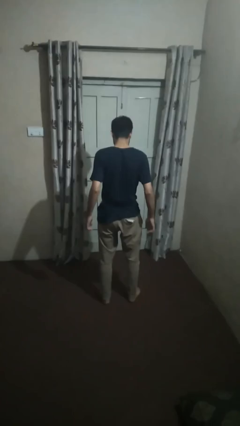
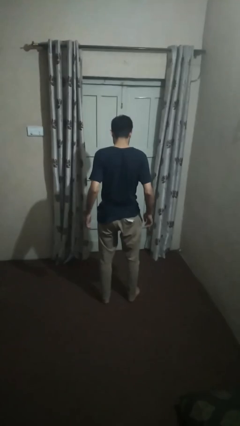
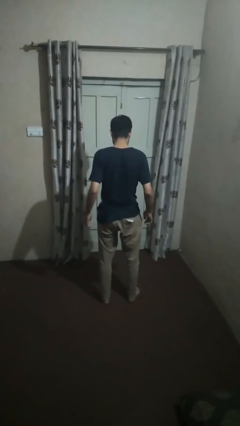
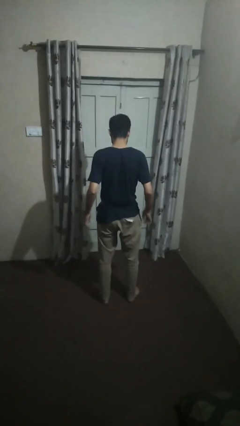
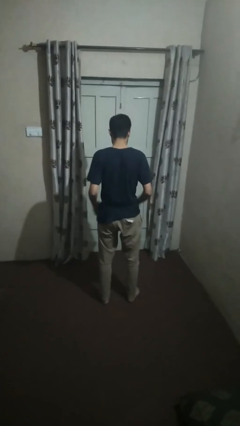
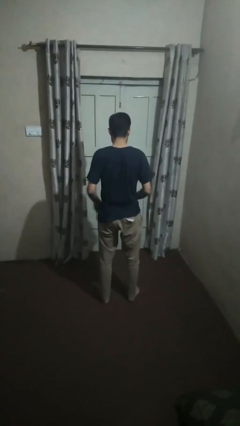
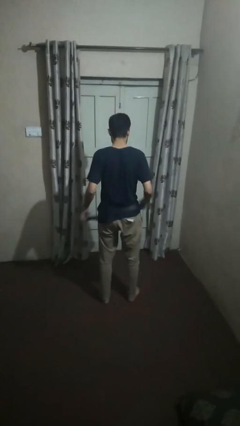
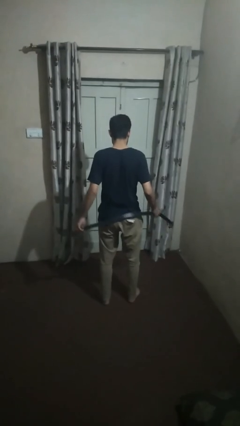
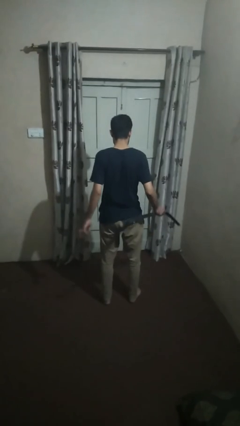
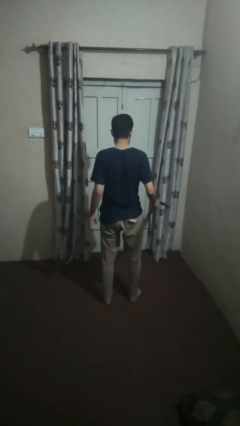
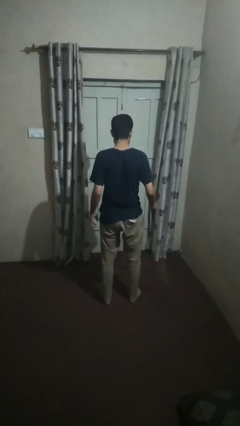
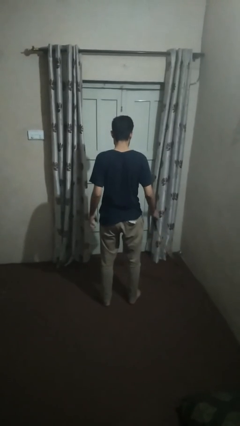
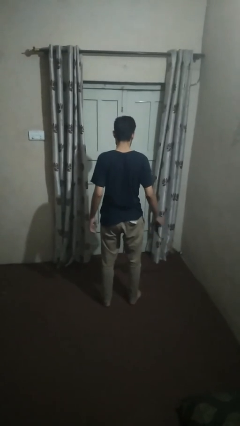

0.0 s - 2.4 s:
person takes off belt

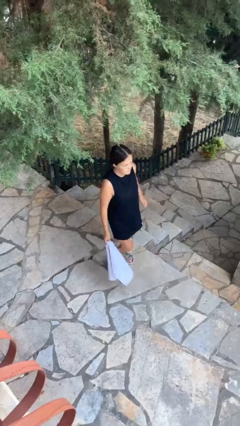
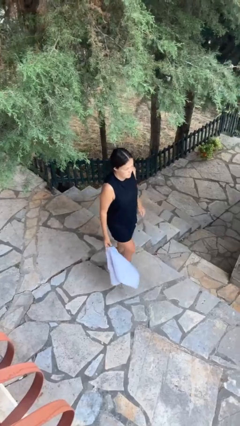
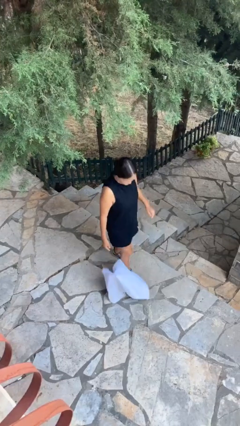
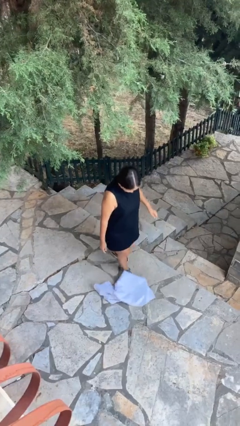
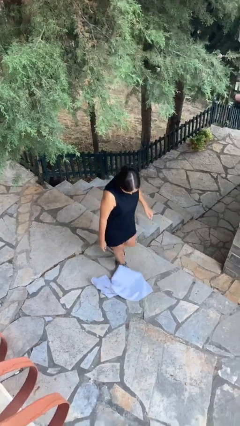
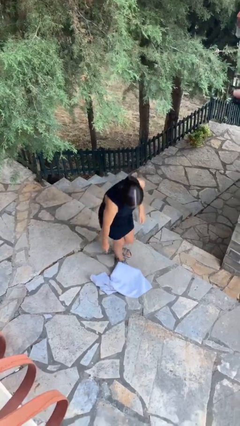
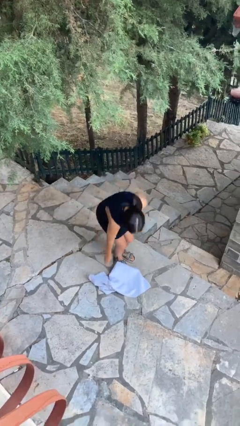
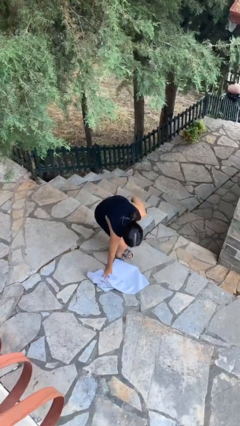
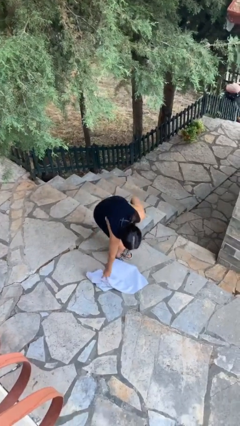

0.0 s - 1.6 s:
person drops object

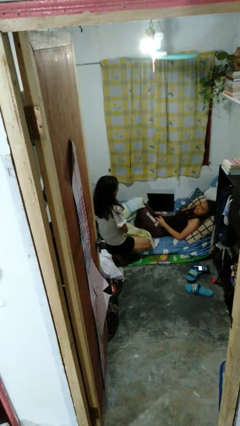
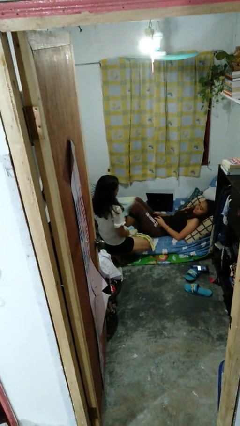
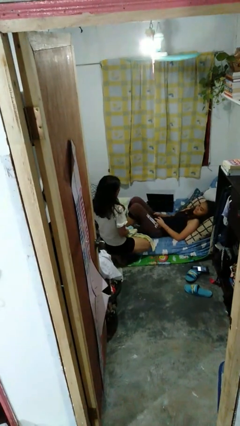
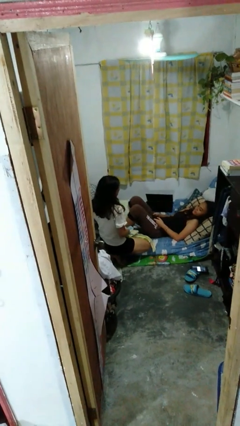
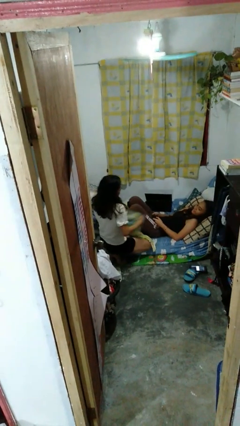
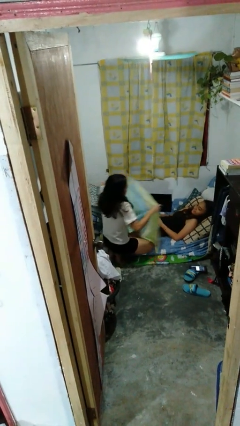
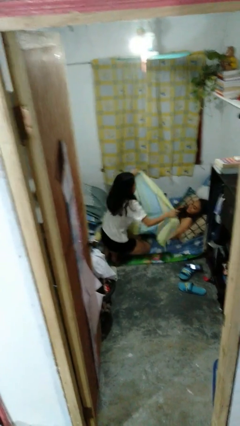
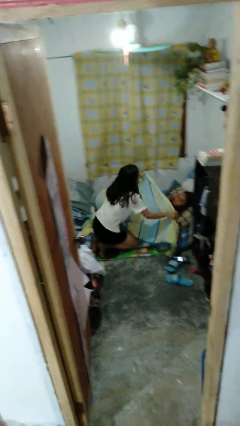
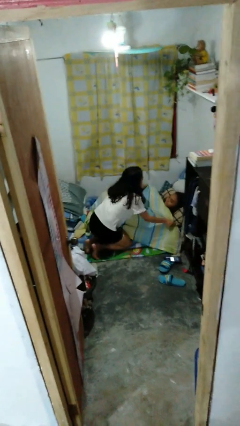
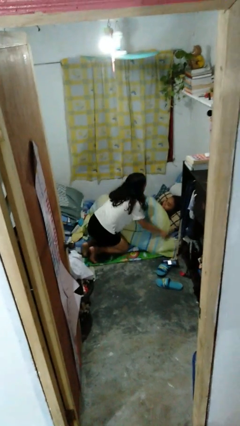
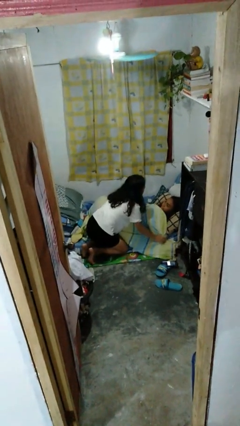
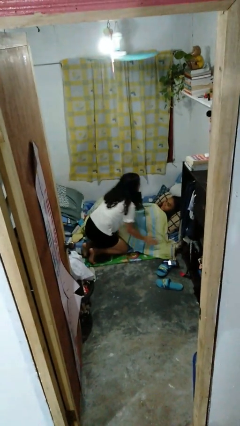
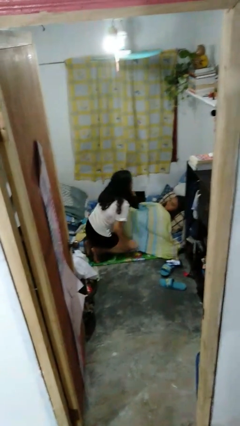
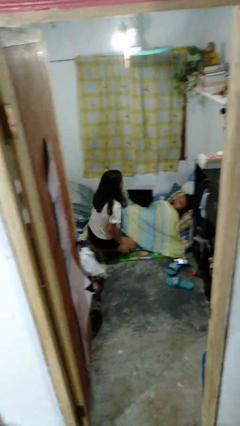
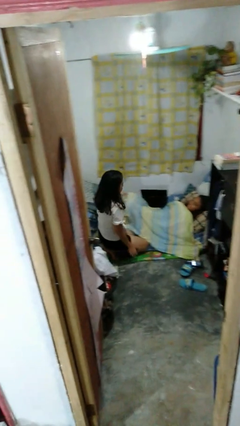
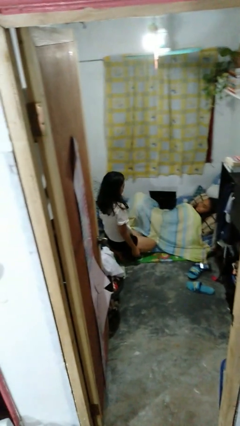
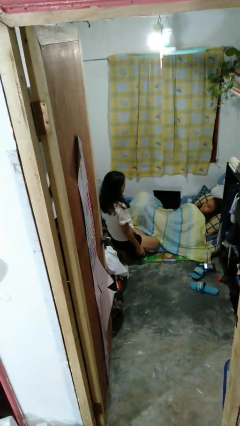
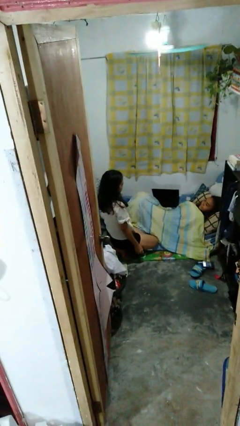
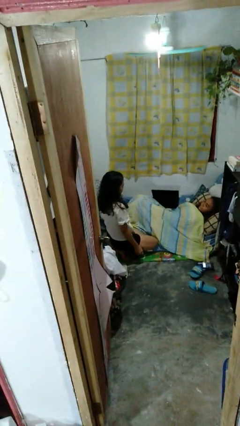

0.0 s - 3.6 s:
person covers friend with blanket

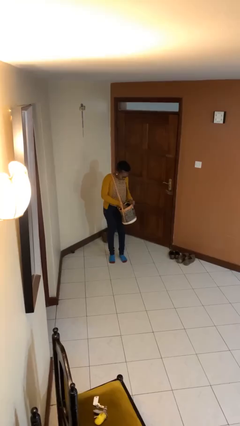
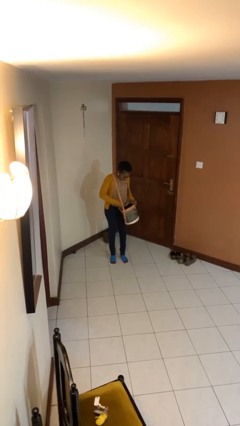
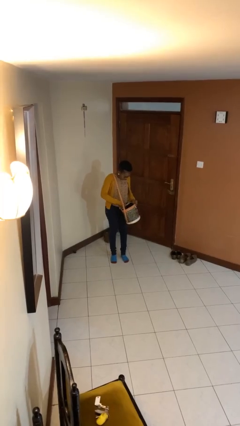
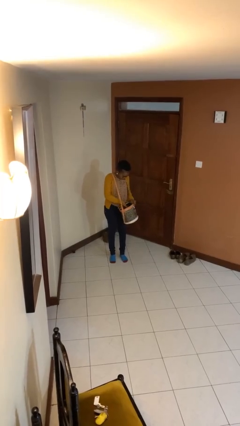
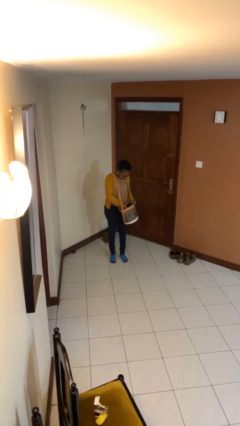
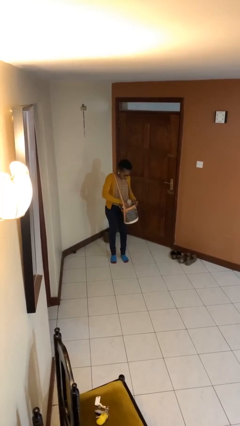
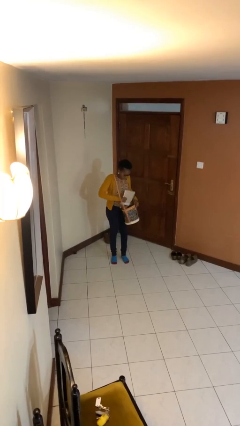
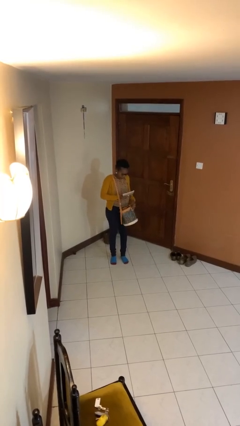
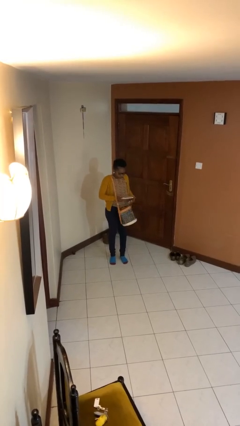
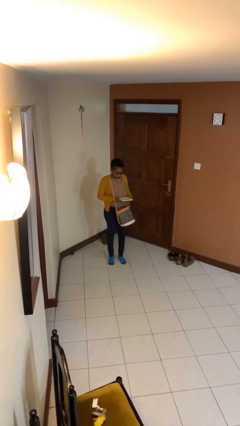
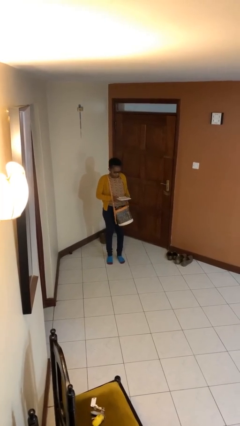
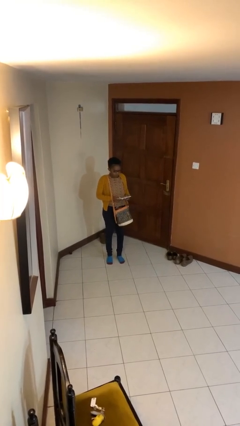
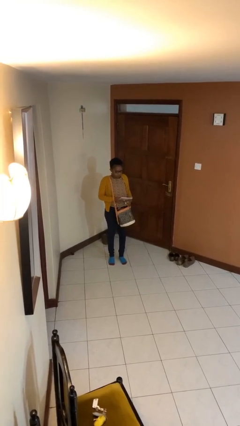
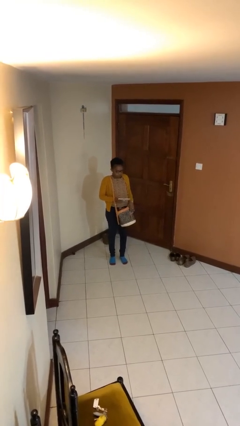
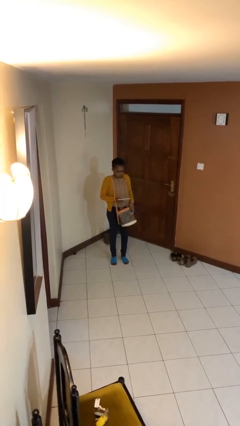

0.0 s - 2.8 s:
person takes object from purse

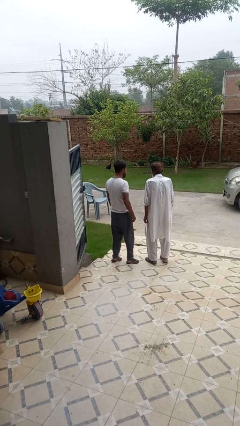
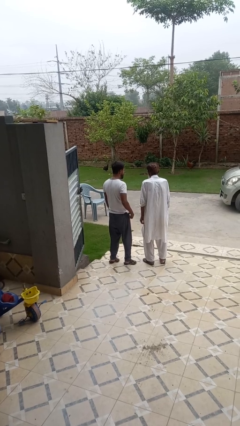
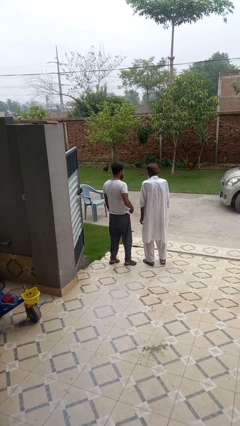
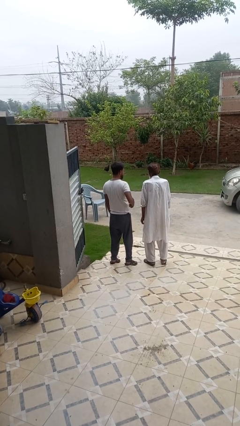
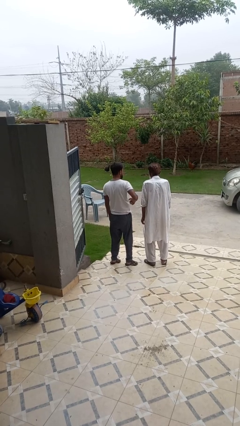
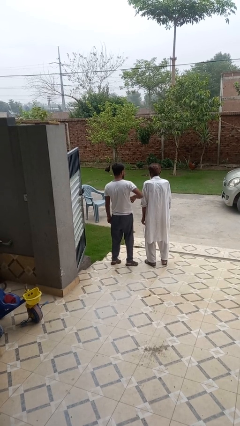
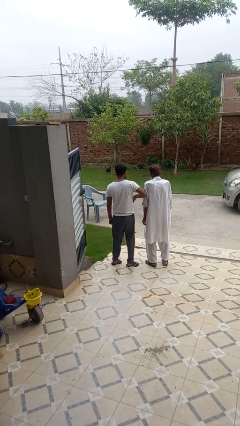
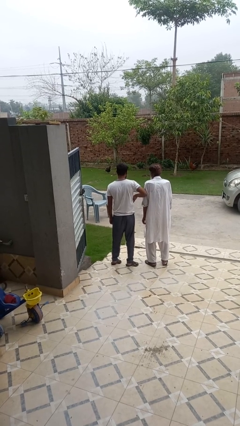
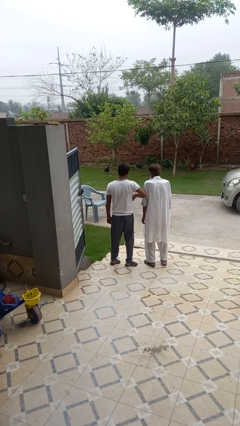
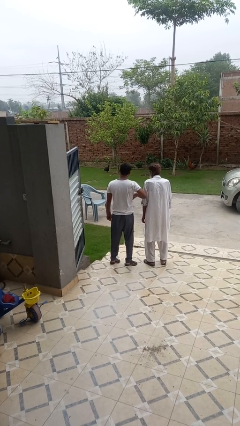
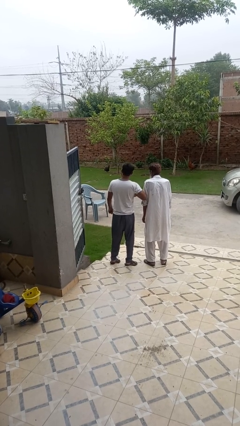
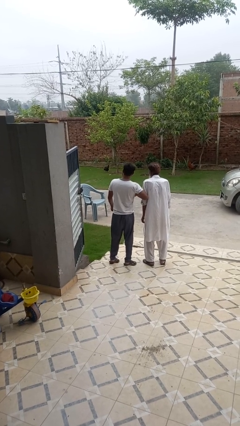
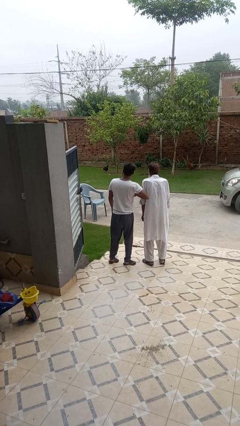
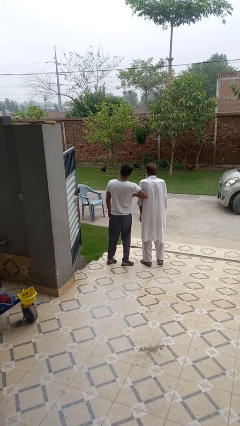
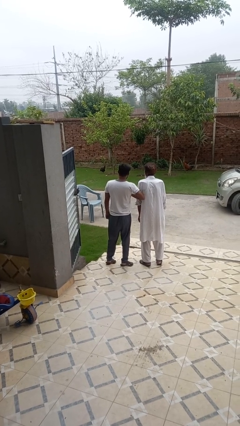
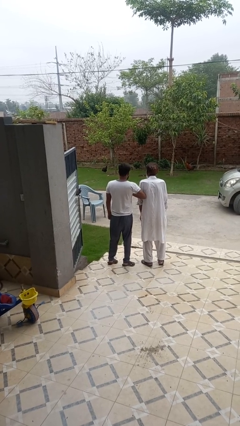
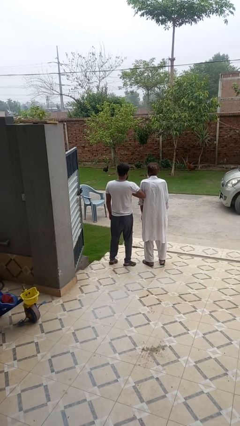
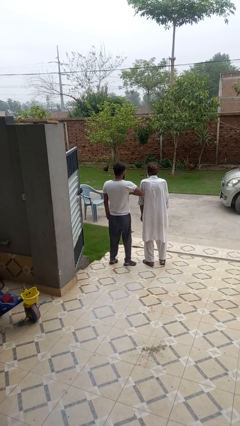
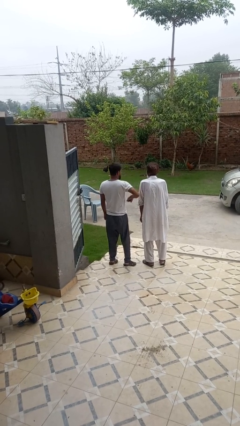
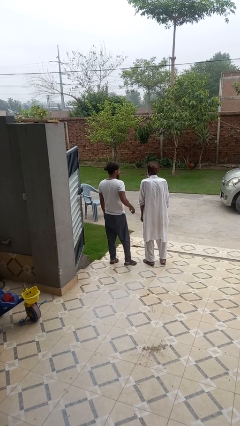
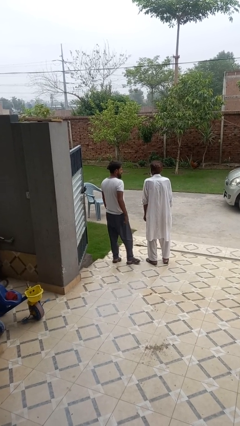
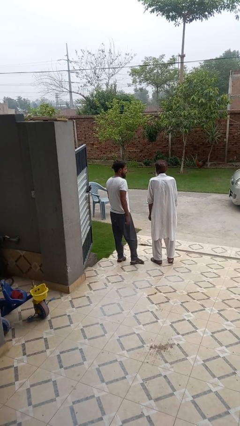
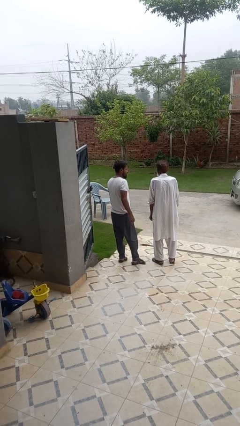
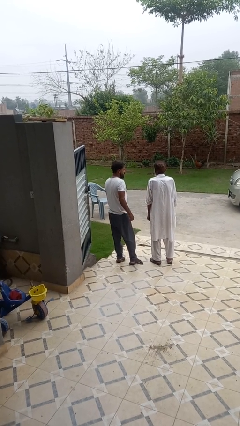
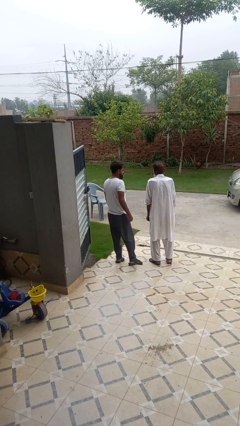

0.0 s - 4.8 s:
person nudges person with elbow

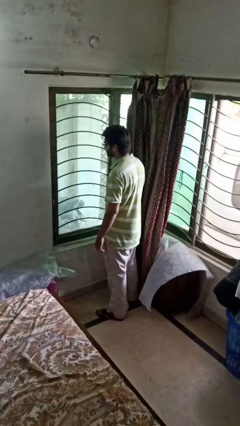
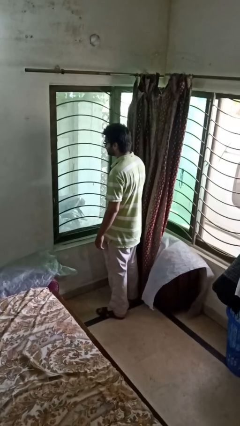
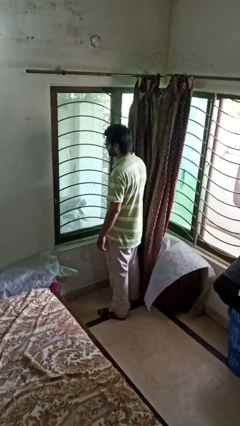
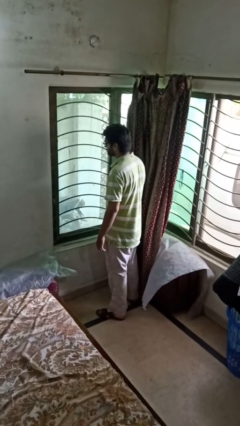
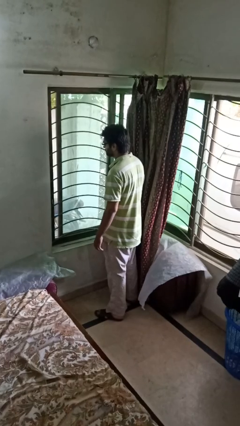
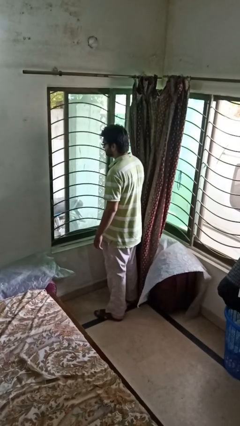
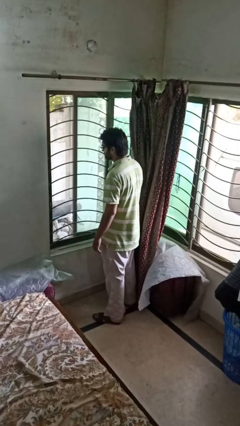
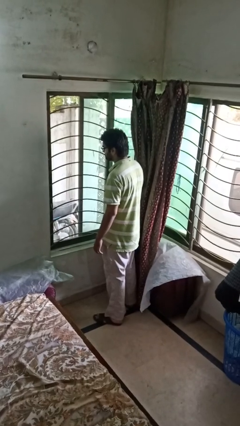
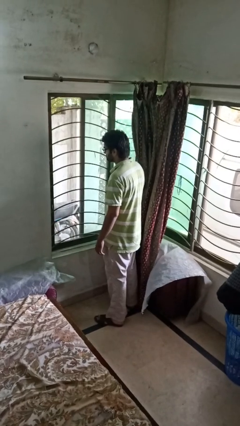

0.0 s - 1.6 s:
person opens home window

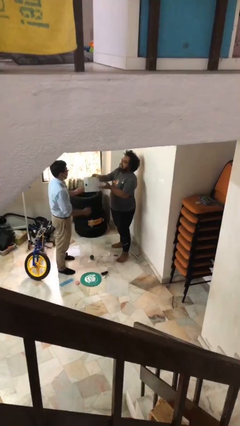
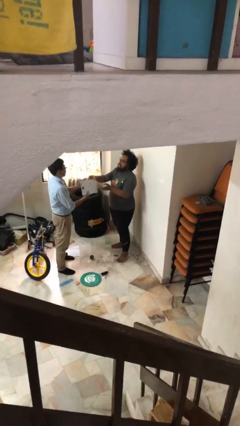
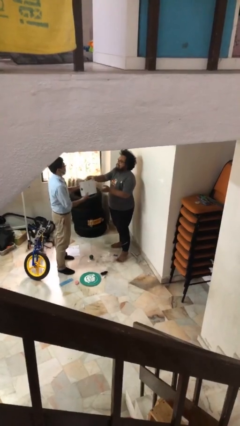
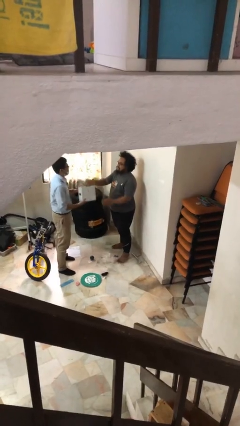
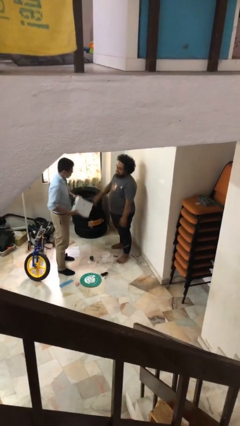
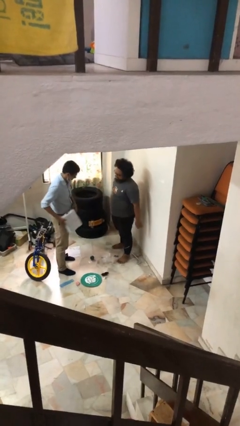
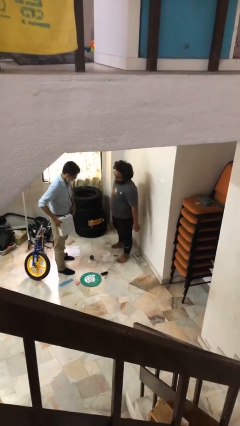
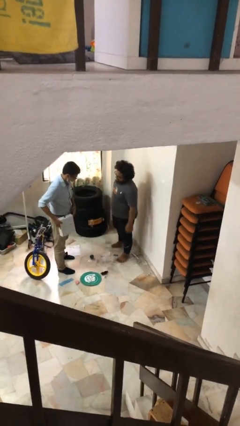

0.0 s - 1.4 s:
person transfers object to person
